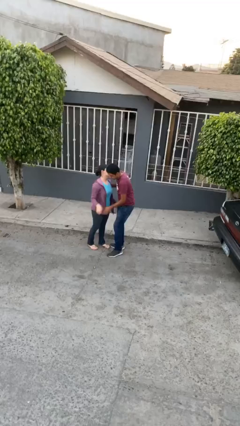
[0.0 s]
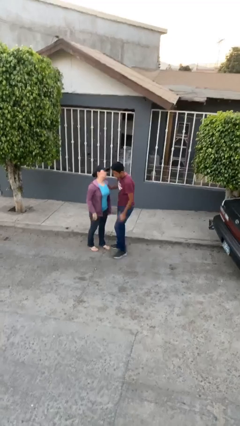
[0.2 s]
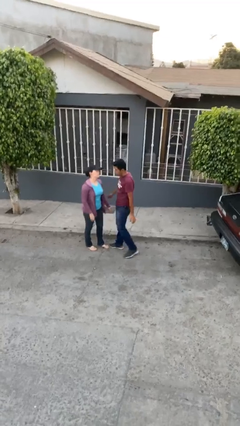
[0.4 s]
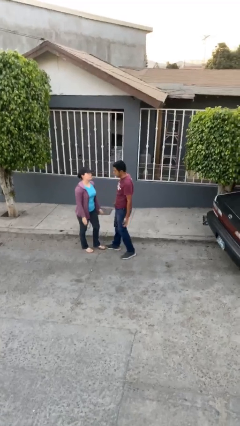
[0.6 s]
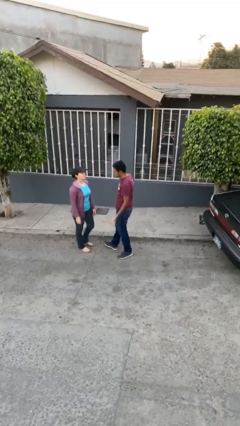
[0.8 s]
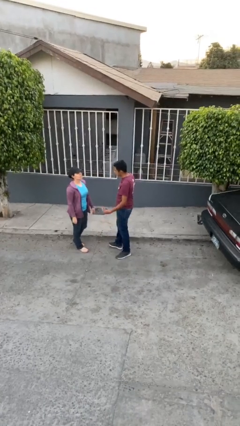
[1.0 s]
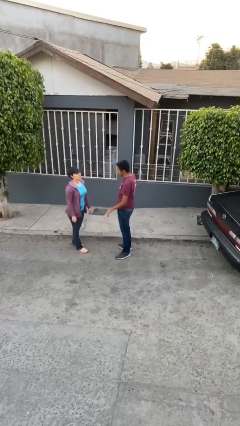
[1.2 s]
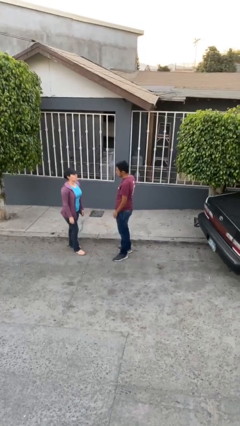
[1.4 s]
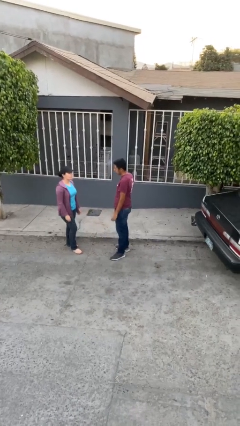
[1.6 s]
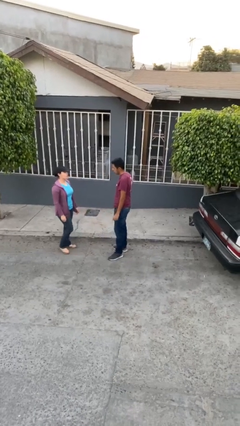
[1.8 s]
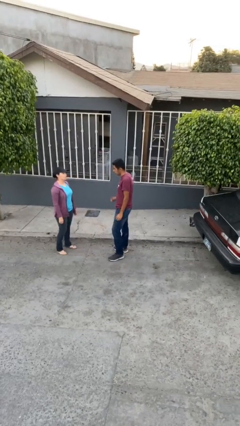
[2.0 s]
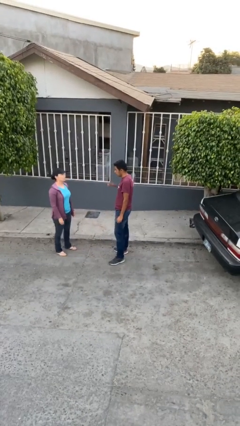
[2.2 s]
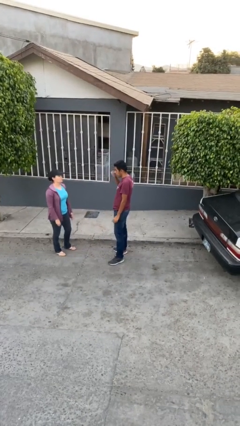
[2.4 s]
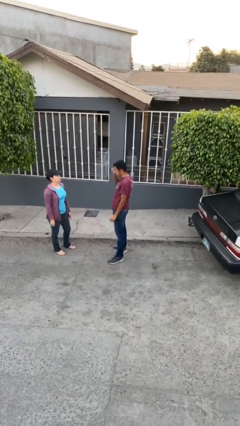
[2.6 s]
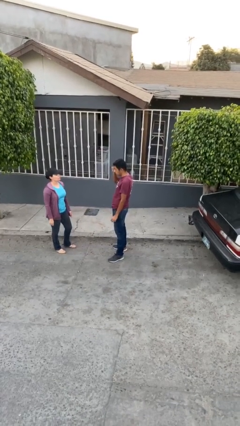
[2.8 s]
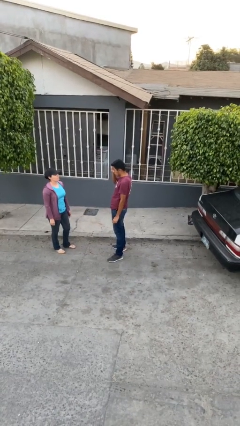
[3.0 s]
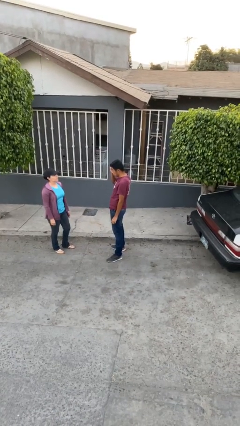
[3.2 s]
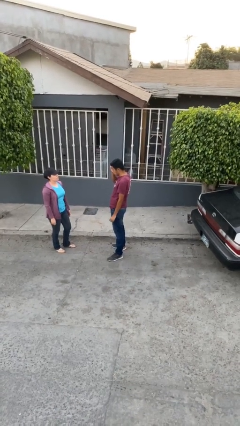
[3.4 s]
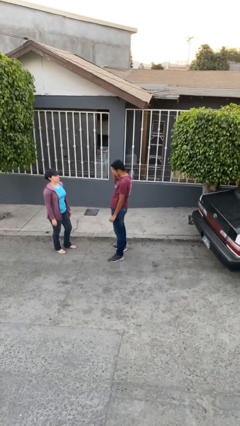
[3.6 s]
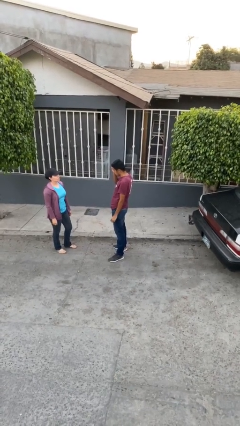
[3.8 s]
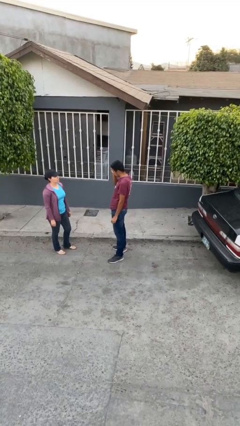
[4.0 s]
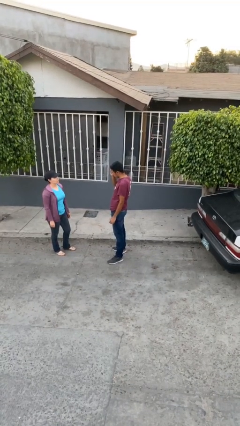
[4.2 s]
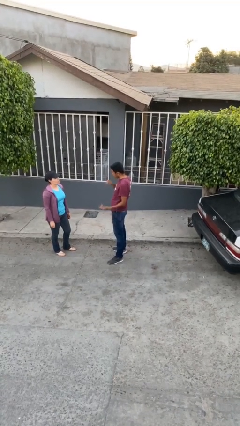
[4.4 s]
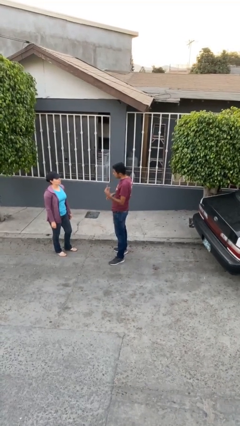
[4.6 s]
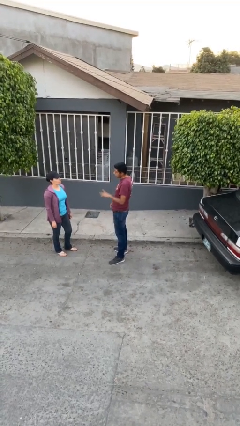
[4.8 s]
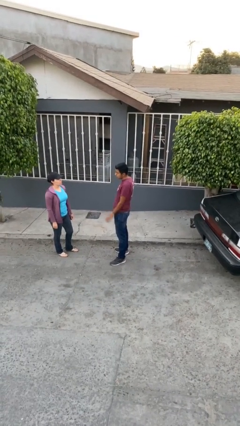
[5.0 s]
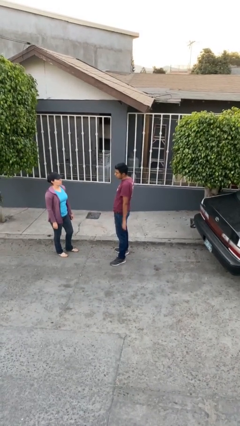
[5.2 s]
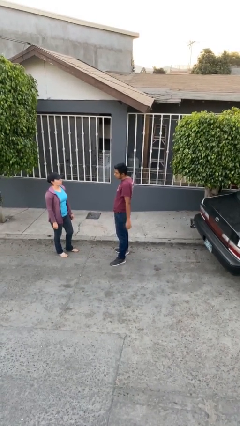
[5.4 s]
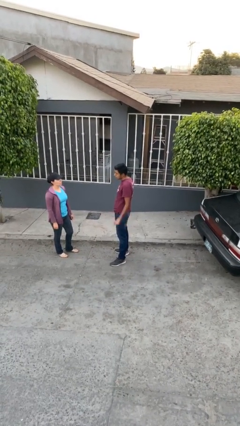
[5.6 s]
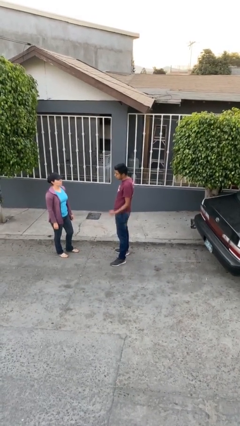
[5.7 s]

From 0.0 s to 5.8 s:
person talks to person

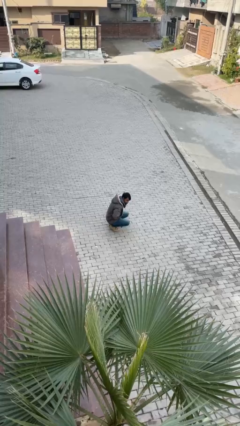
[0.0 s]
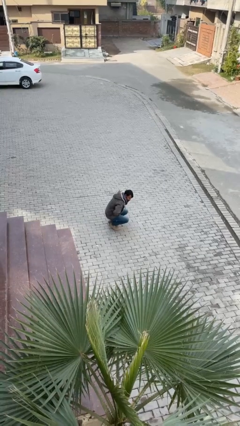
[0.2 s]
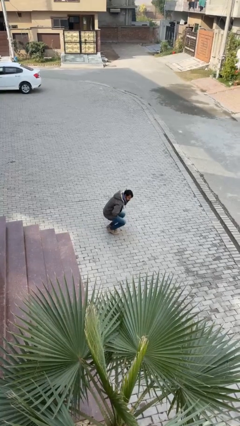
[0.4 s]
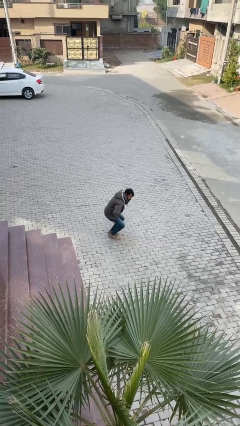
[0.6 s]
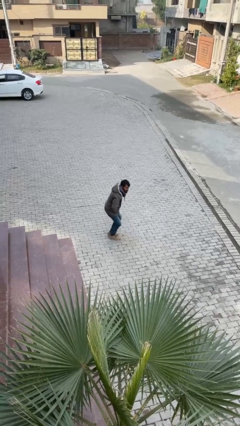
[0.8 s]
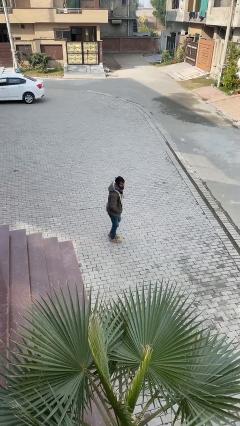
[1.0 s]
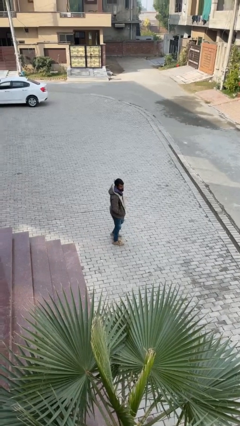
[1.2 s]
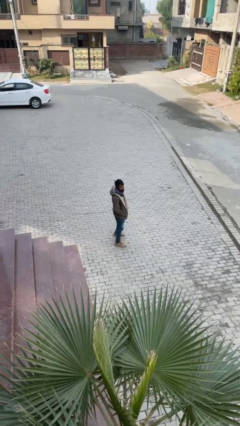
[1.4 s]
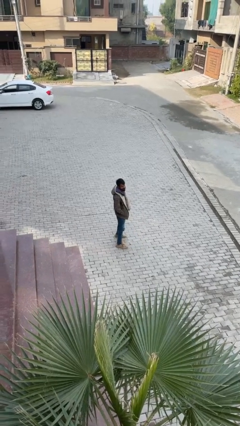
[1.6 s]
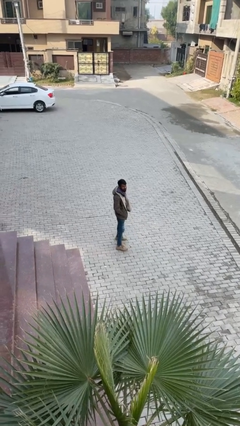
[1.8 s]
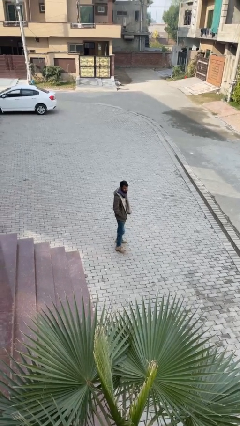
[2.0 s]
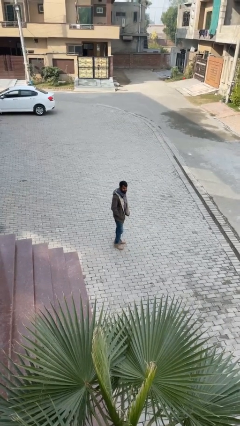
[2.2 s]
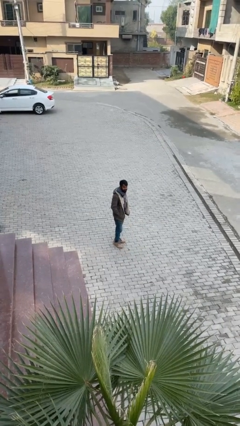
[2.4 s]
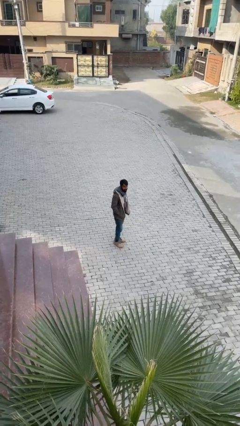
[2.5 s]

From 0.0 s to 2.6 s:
person stands up

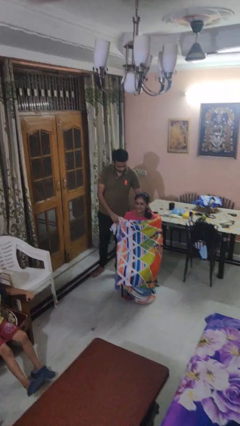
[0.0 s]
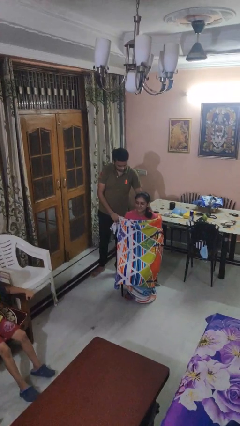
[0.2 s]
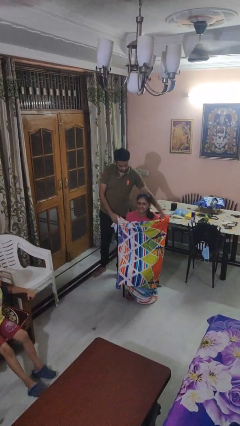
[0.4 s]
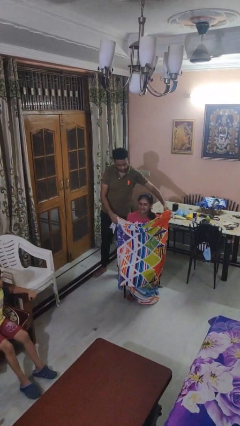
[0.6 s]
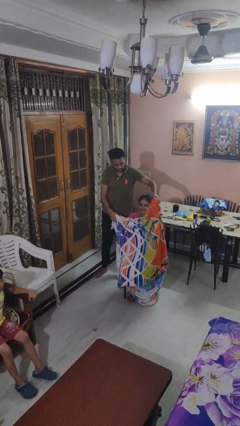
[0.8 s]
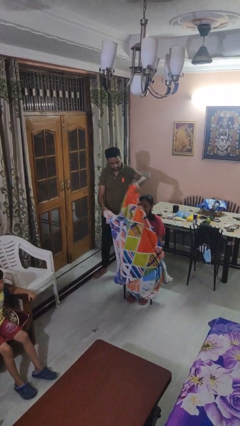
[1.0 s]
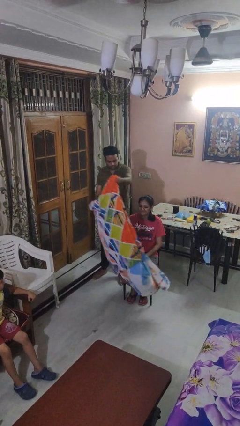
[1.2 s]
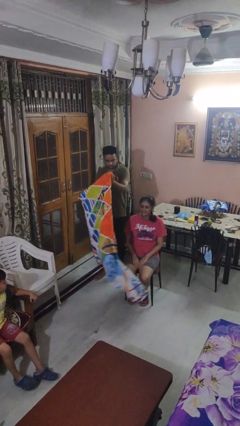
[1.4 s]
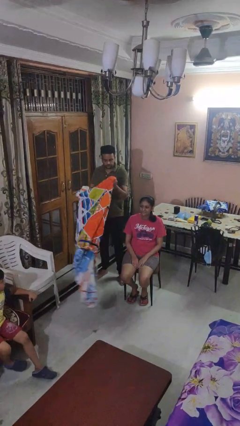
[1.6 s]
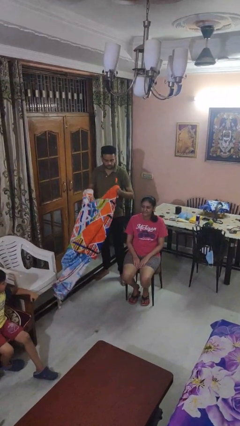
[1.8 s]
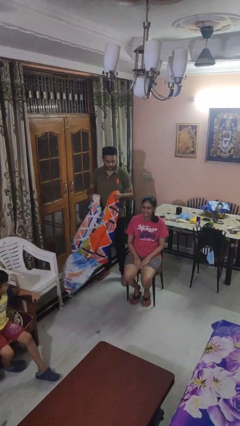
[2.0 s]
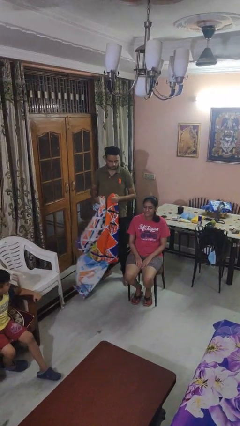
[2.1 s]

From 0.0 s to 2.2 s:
person uncovers friend with blanket

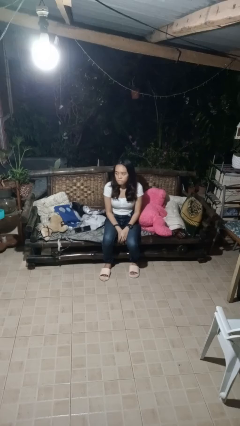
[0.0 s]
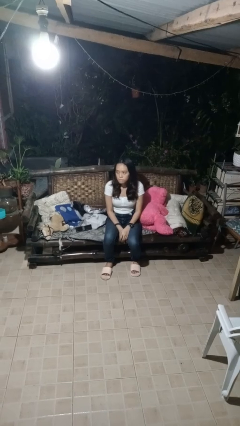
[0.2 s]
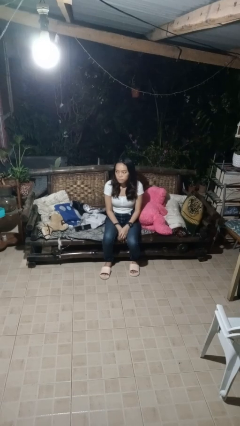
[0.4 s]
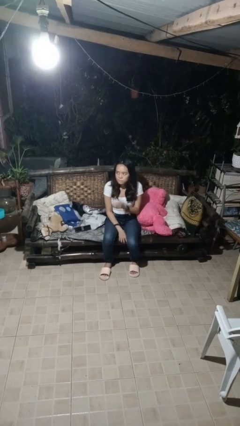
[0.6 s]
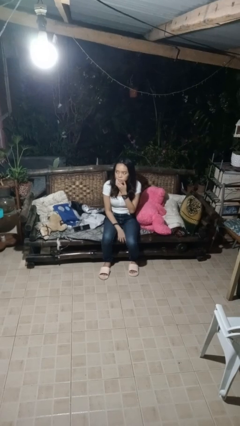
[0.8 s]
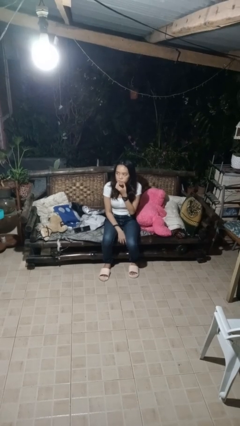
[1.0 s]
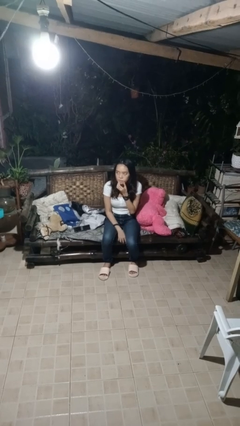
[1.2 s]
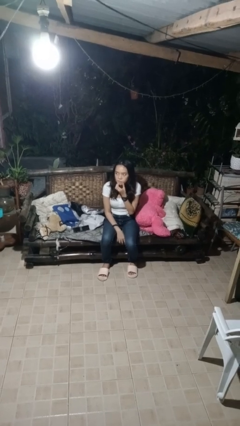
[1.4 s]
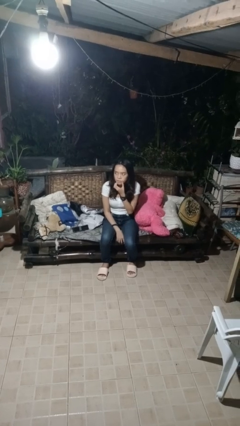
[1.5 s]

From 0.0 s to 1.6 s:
person strokes chin

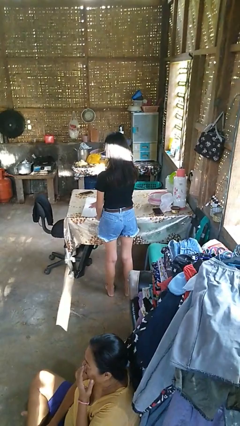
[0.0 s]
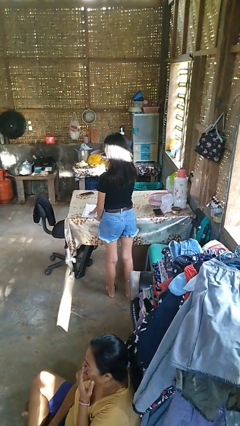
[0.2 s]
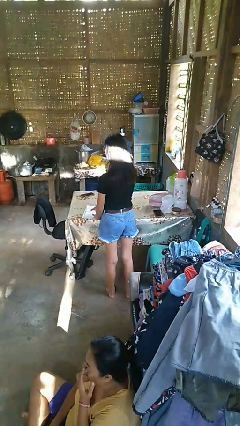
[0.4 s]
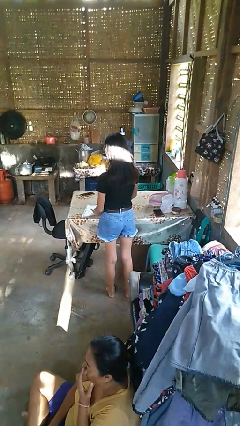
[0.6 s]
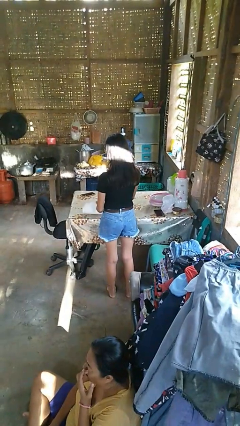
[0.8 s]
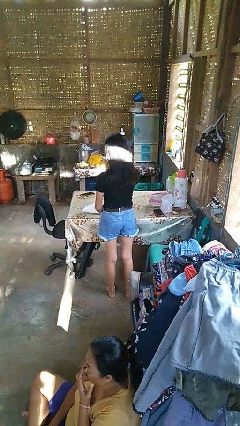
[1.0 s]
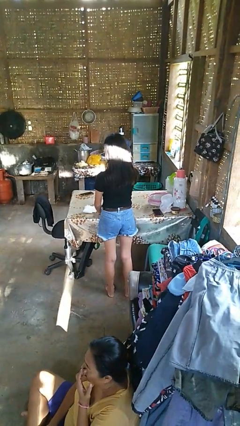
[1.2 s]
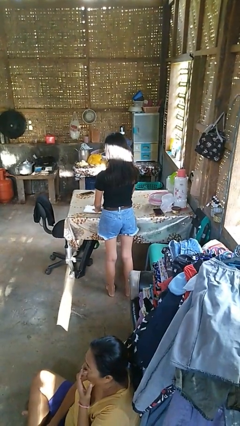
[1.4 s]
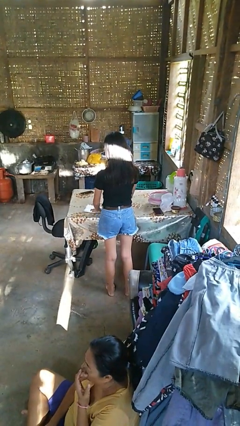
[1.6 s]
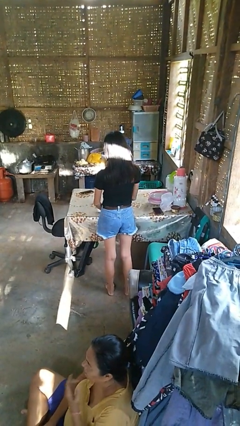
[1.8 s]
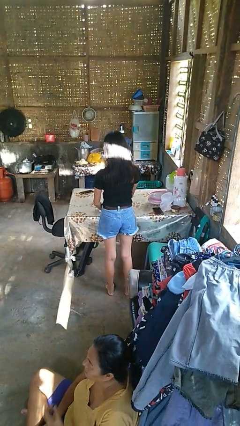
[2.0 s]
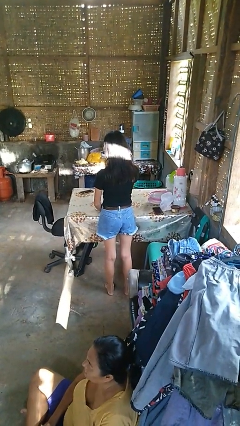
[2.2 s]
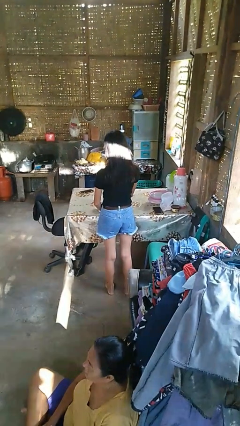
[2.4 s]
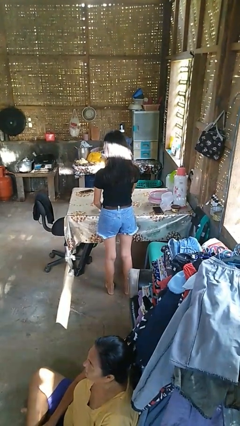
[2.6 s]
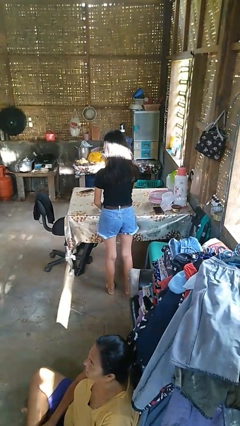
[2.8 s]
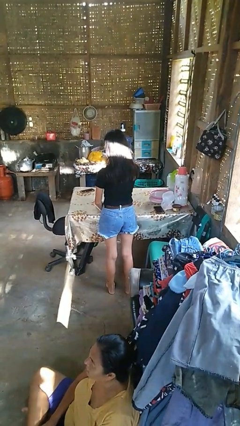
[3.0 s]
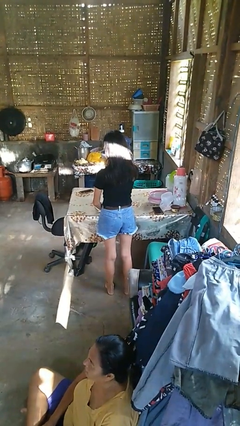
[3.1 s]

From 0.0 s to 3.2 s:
person folds tablecloth

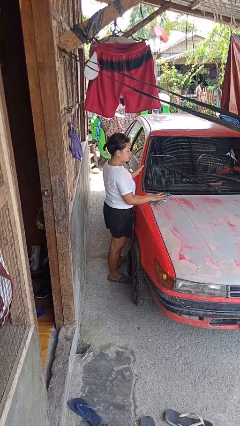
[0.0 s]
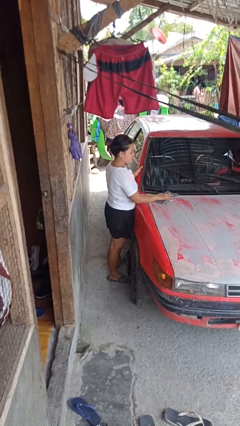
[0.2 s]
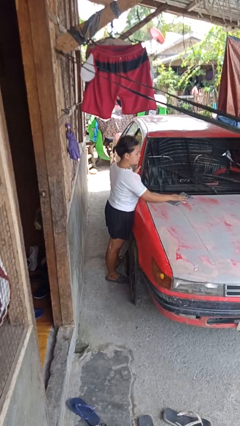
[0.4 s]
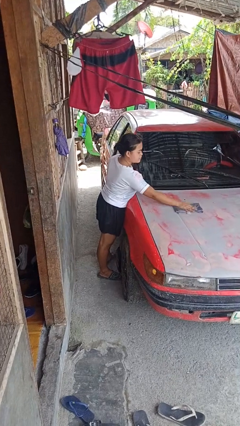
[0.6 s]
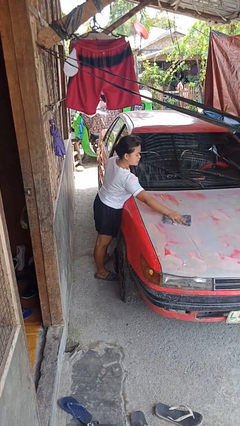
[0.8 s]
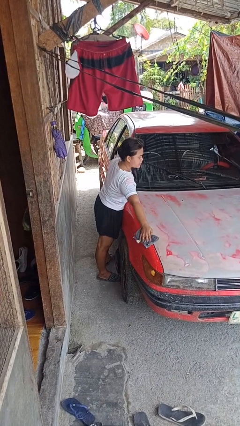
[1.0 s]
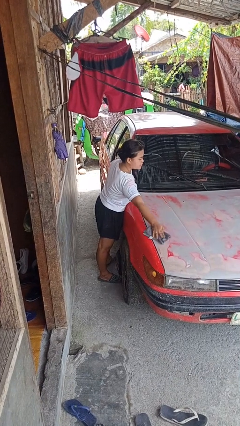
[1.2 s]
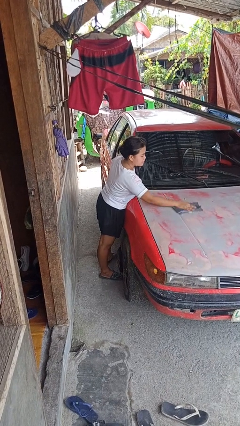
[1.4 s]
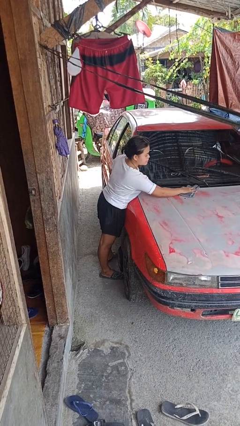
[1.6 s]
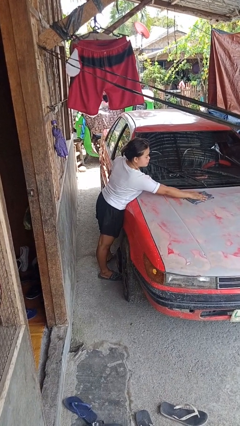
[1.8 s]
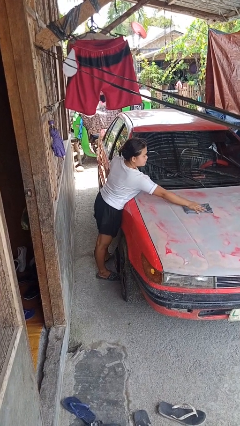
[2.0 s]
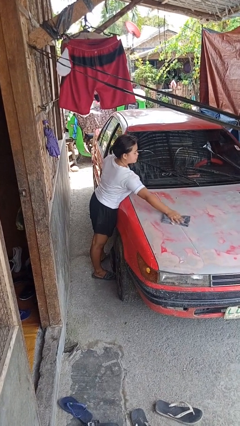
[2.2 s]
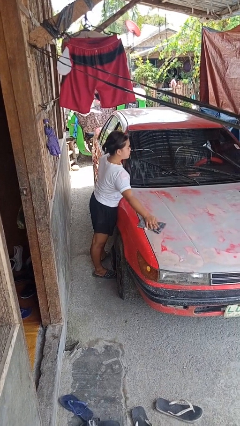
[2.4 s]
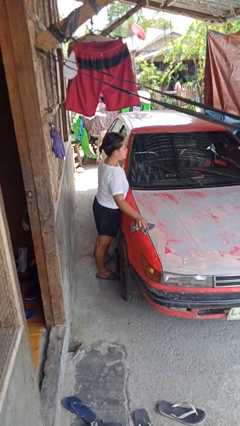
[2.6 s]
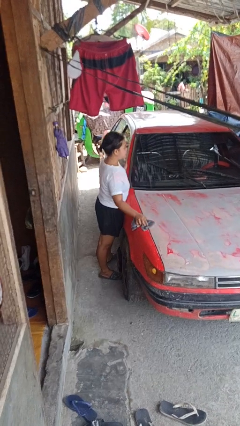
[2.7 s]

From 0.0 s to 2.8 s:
person polishes car with rag
